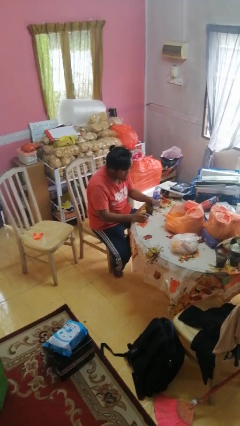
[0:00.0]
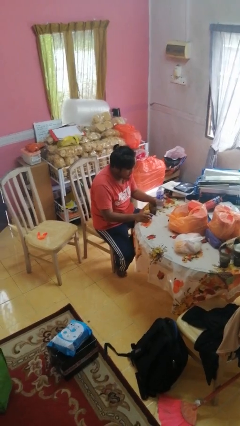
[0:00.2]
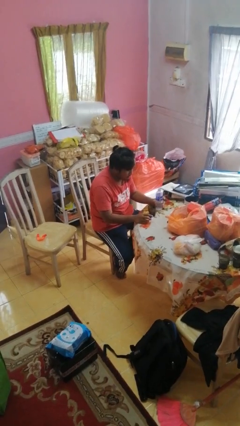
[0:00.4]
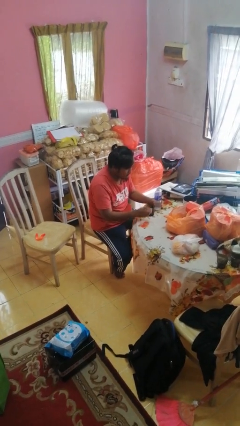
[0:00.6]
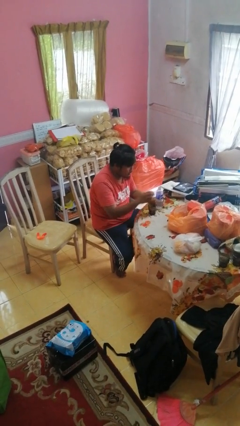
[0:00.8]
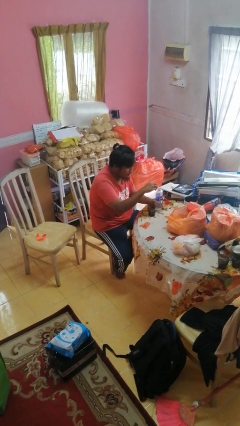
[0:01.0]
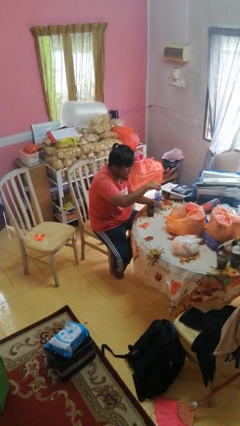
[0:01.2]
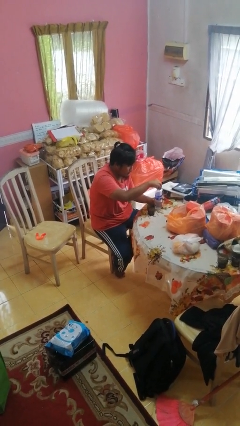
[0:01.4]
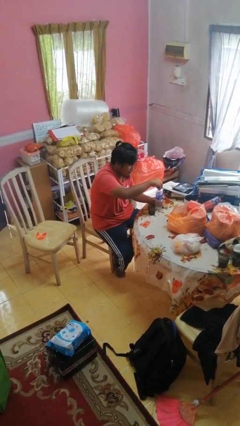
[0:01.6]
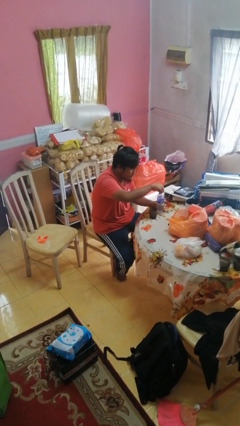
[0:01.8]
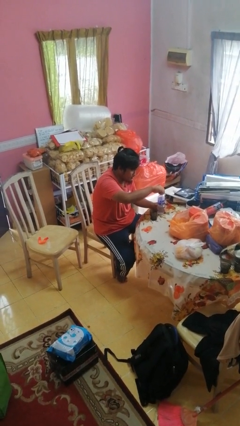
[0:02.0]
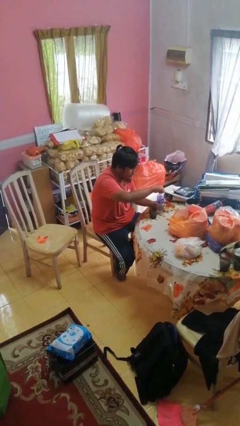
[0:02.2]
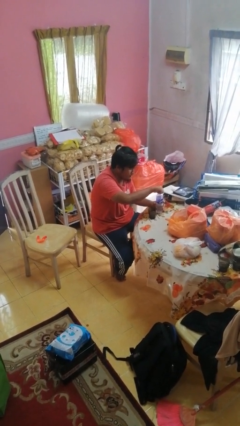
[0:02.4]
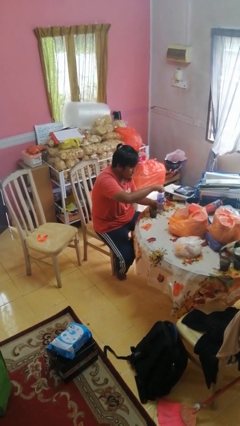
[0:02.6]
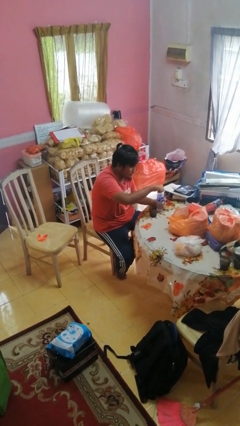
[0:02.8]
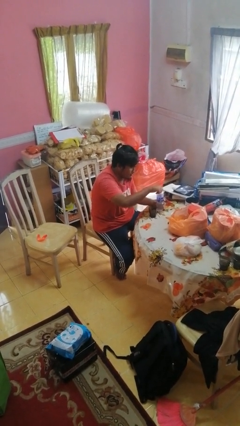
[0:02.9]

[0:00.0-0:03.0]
person screws lid to bottle

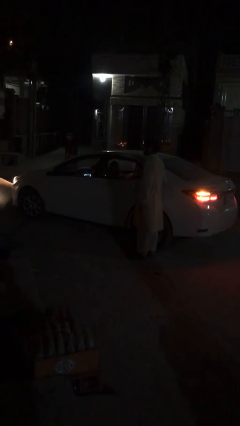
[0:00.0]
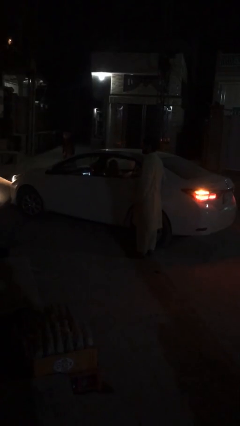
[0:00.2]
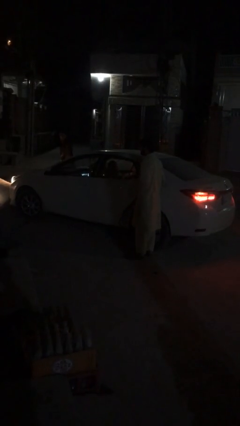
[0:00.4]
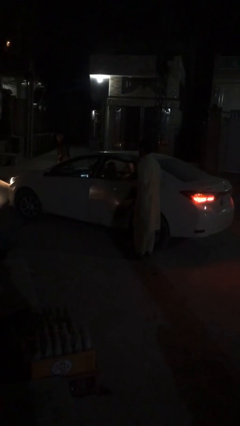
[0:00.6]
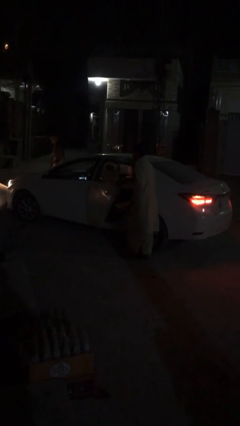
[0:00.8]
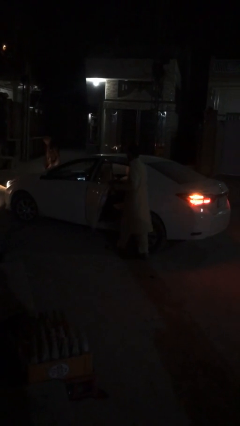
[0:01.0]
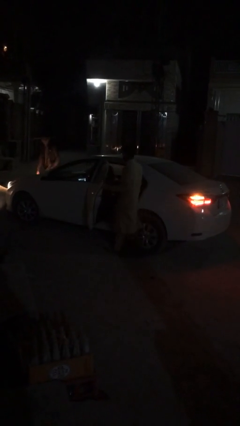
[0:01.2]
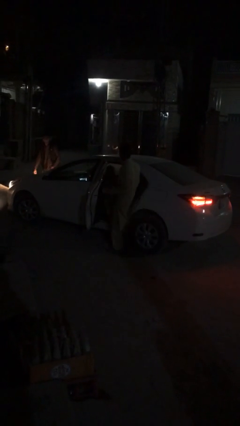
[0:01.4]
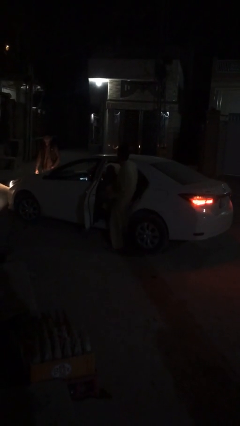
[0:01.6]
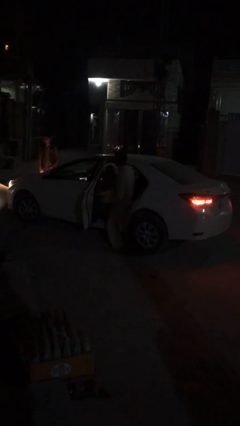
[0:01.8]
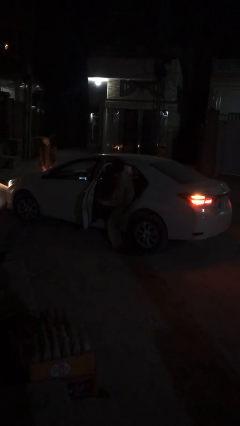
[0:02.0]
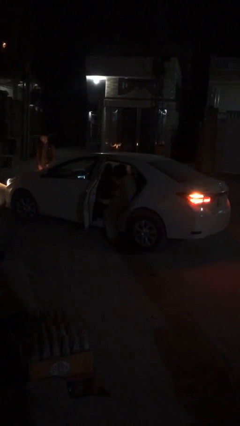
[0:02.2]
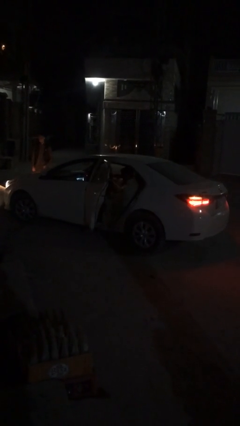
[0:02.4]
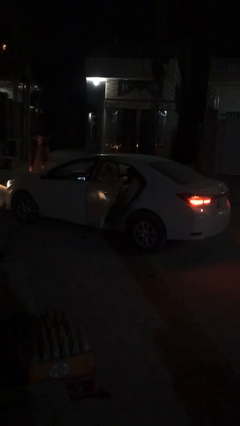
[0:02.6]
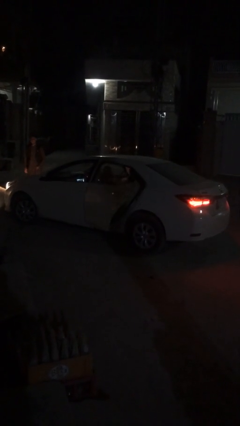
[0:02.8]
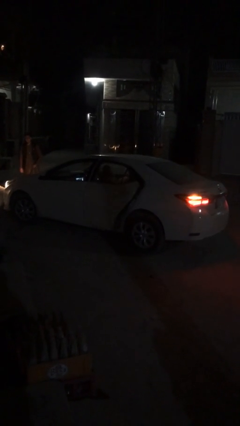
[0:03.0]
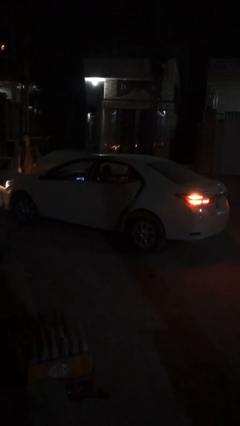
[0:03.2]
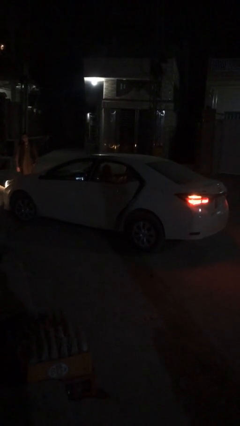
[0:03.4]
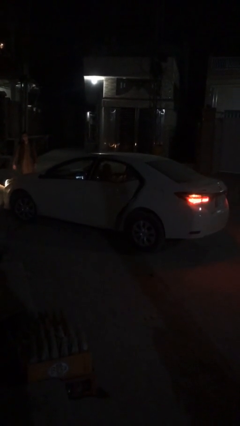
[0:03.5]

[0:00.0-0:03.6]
car picks up person

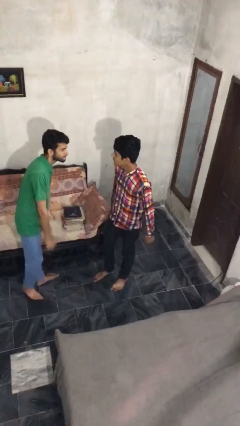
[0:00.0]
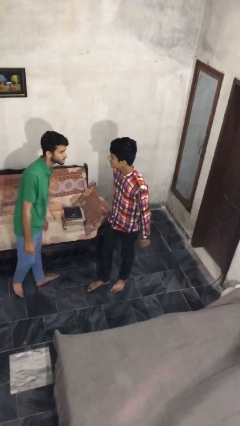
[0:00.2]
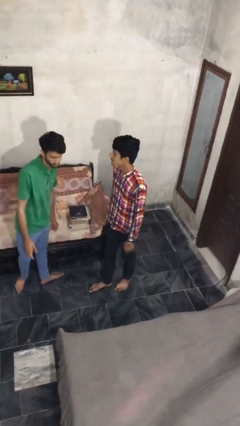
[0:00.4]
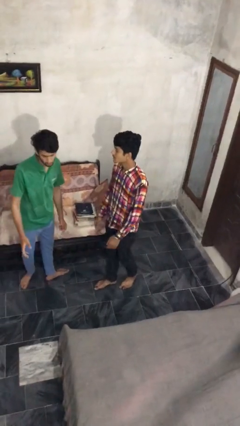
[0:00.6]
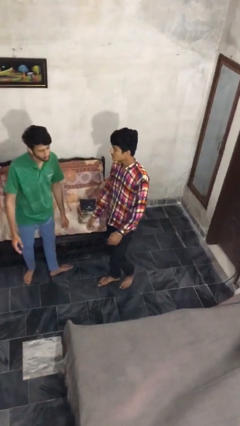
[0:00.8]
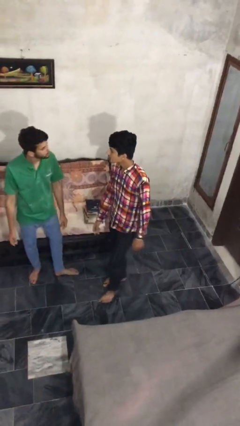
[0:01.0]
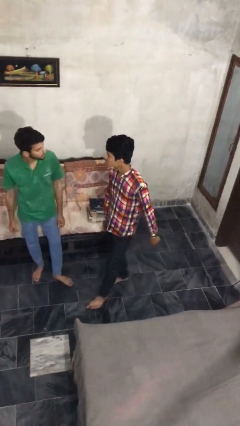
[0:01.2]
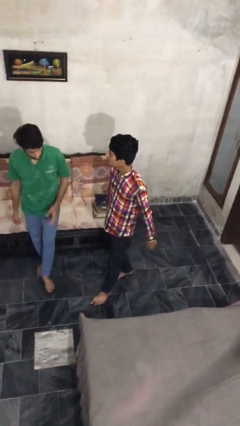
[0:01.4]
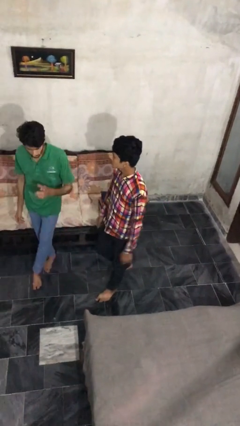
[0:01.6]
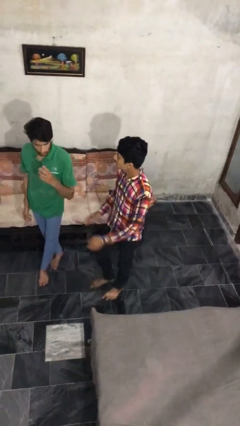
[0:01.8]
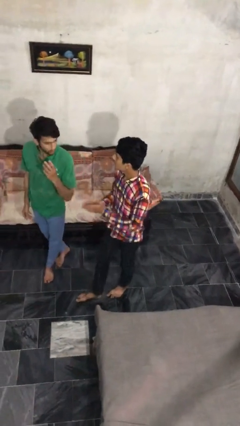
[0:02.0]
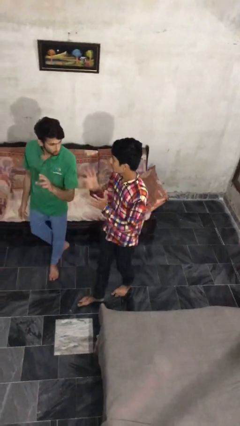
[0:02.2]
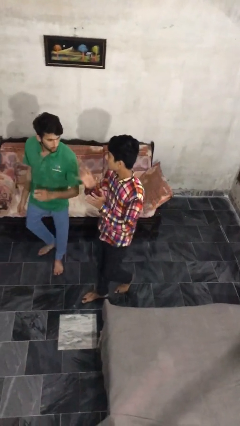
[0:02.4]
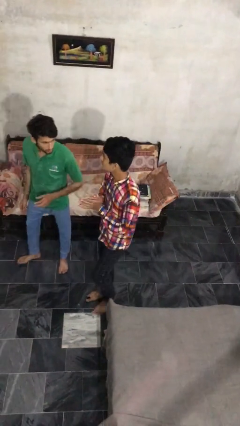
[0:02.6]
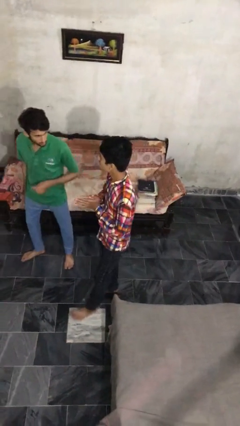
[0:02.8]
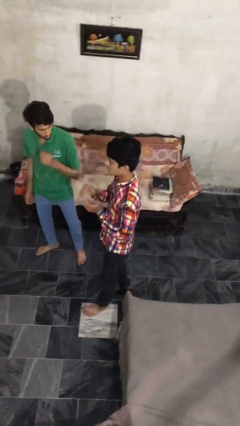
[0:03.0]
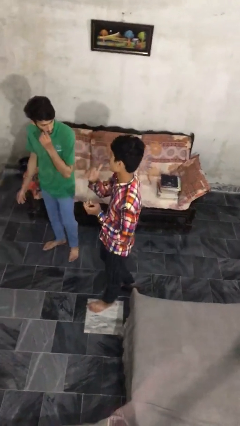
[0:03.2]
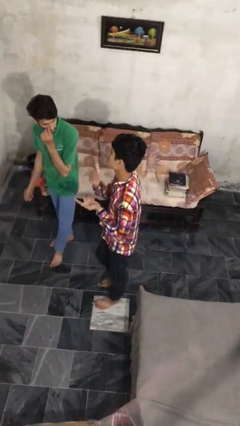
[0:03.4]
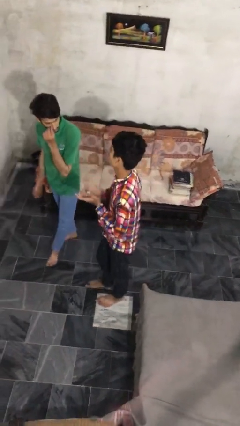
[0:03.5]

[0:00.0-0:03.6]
person talks to person

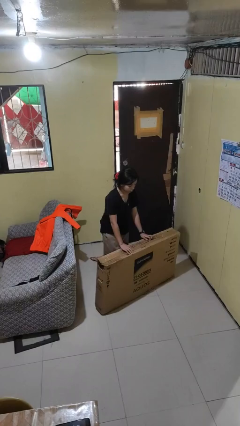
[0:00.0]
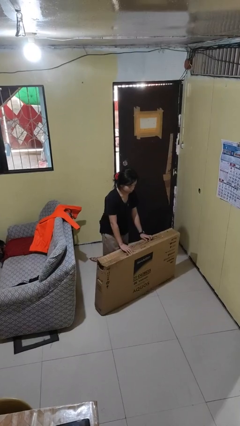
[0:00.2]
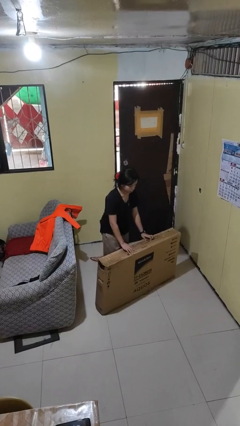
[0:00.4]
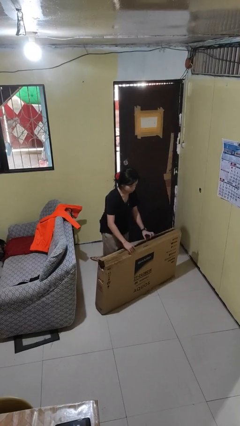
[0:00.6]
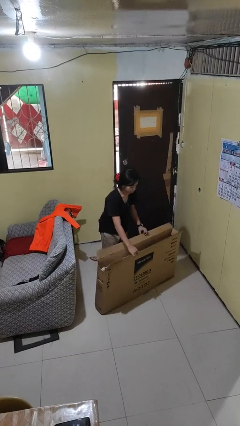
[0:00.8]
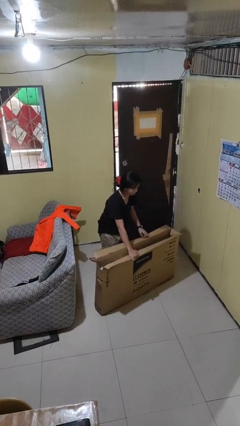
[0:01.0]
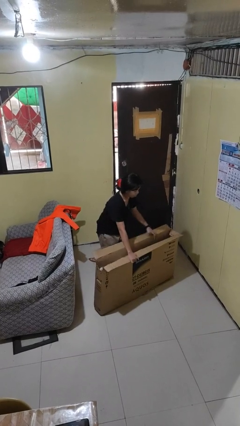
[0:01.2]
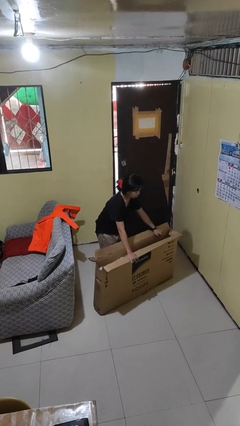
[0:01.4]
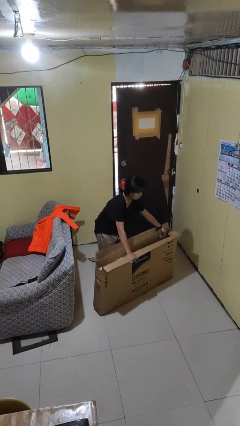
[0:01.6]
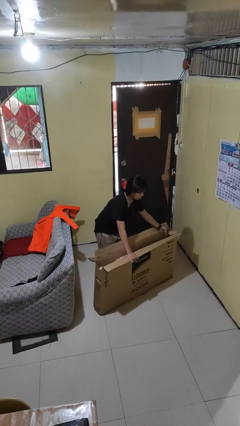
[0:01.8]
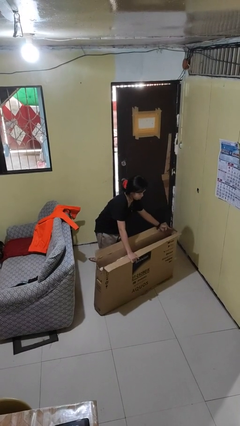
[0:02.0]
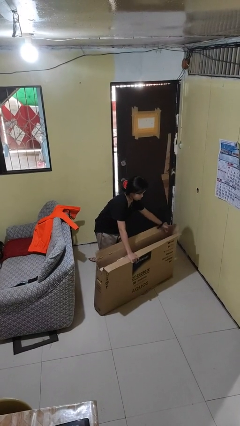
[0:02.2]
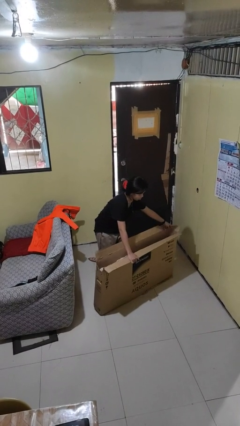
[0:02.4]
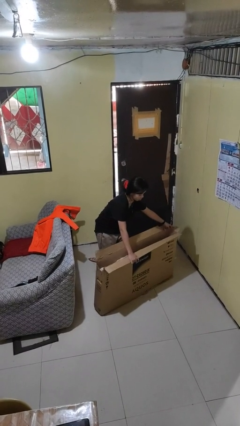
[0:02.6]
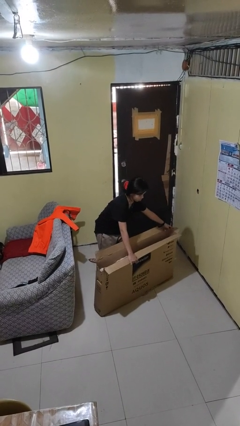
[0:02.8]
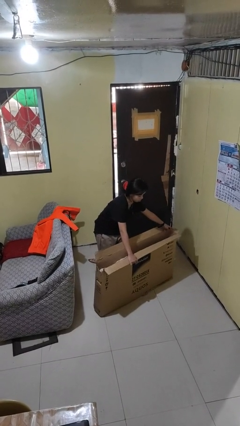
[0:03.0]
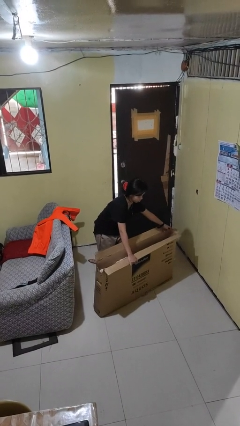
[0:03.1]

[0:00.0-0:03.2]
person opens box

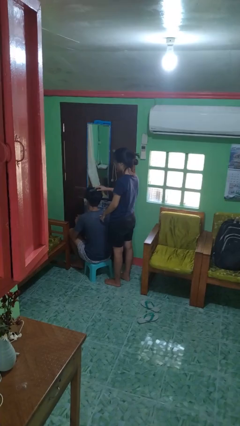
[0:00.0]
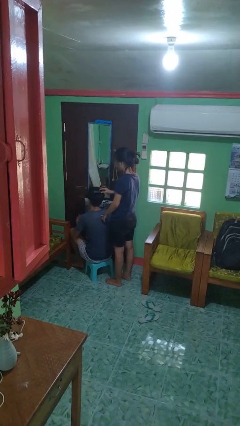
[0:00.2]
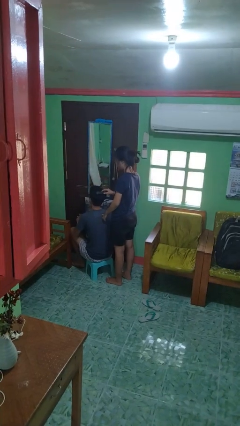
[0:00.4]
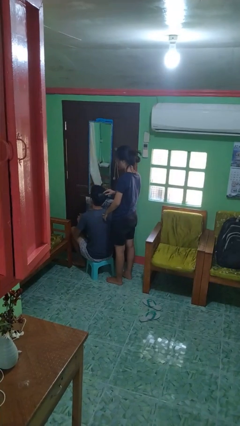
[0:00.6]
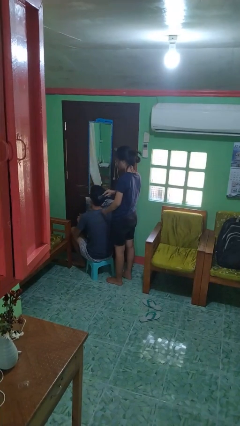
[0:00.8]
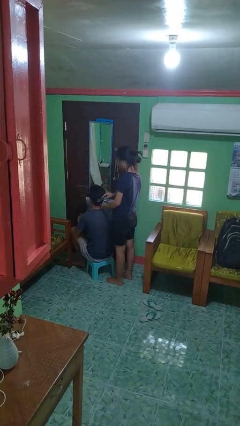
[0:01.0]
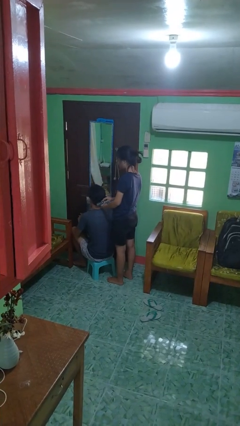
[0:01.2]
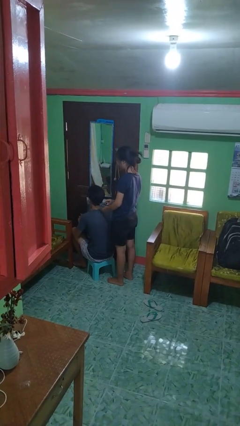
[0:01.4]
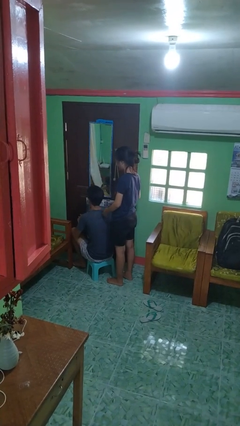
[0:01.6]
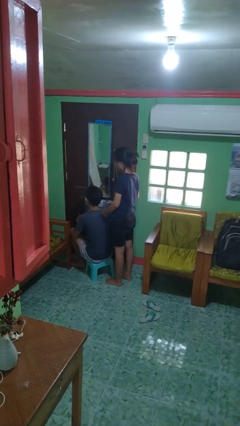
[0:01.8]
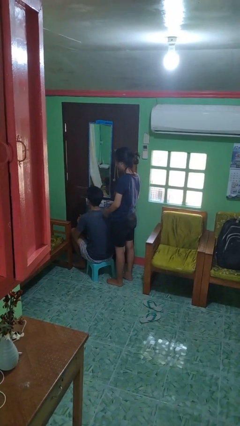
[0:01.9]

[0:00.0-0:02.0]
person brushes hair of person

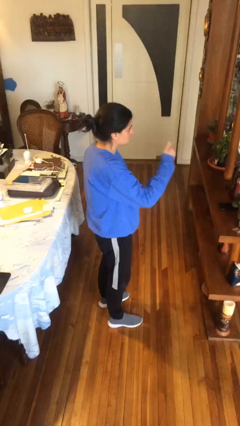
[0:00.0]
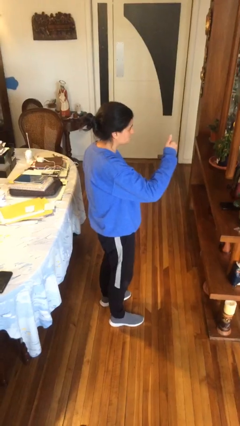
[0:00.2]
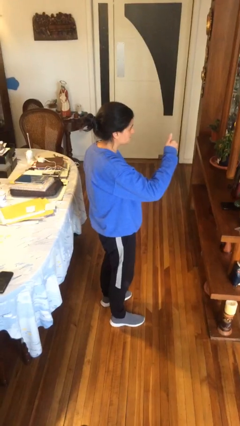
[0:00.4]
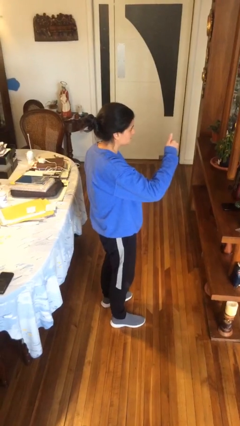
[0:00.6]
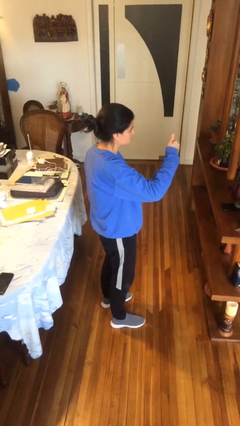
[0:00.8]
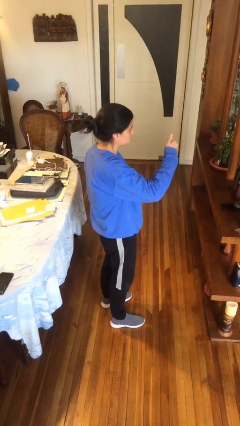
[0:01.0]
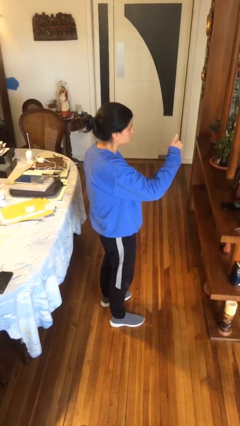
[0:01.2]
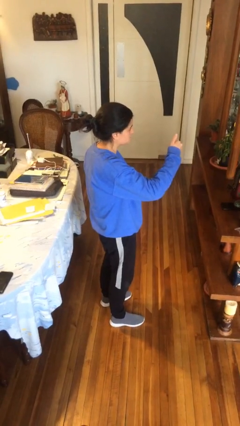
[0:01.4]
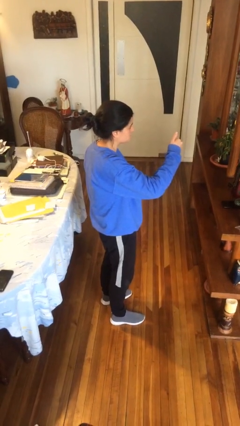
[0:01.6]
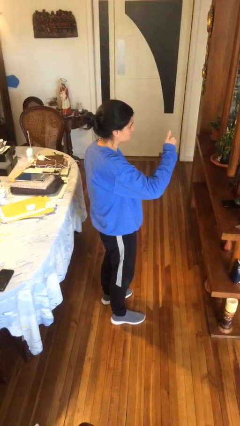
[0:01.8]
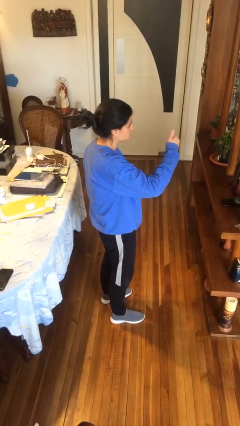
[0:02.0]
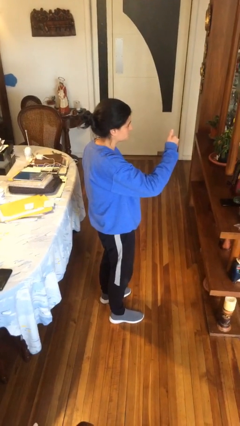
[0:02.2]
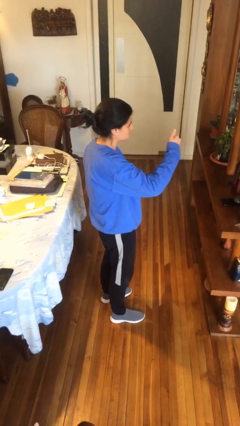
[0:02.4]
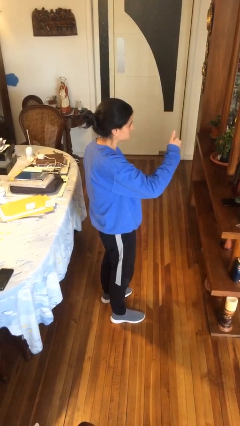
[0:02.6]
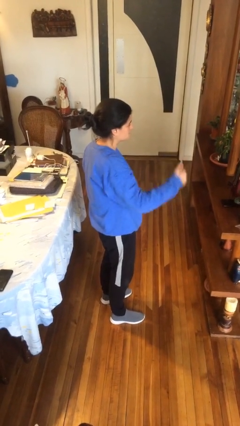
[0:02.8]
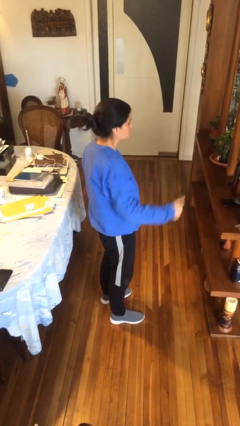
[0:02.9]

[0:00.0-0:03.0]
person gestures thumbs up
